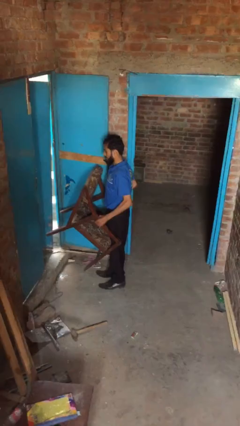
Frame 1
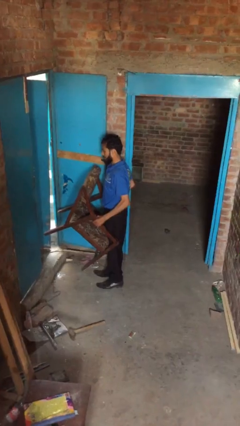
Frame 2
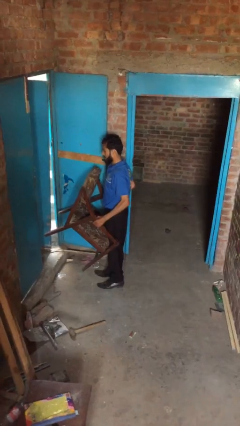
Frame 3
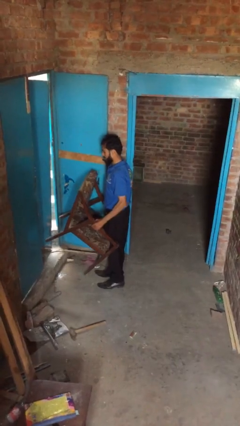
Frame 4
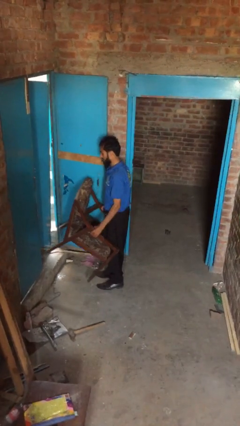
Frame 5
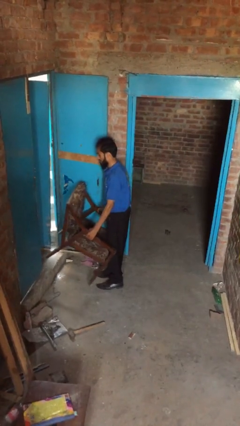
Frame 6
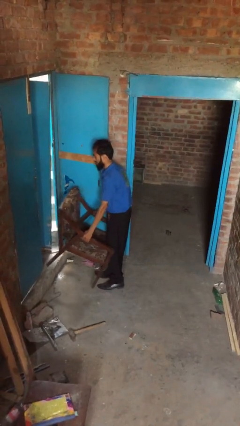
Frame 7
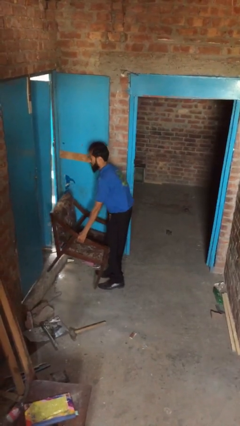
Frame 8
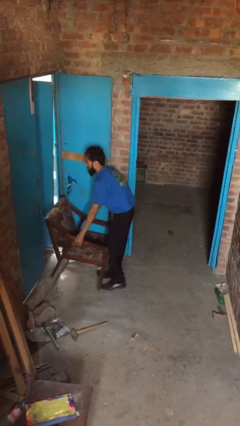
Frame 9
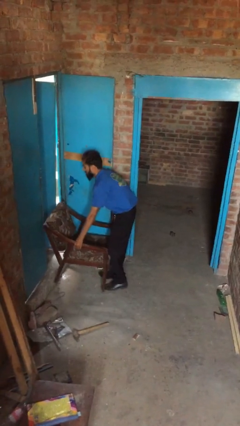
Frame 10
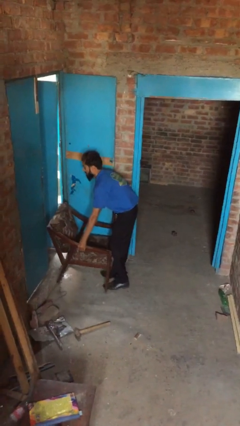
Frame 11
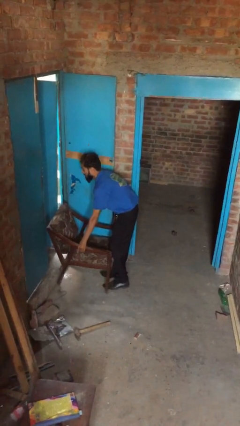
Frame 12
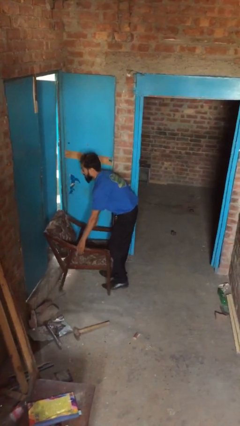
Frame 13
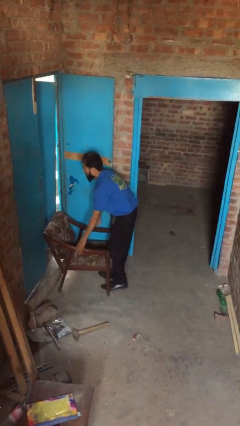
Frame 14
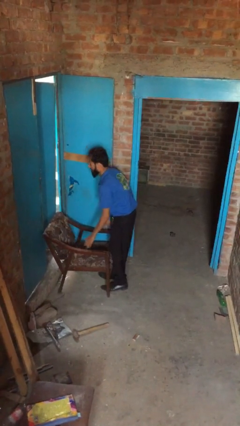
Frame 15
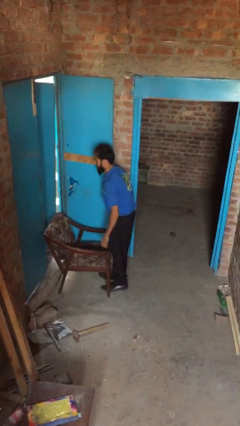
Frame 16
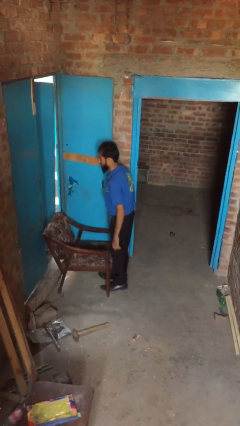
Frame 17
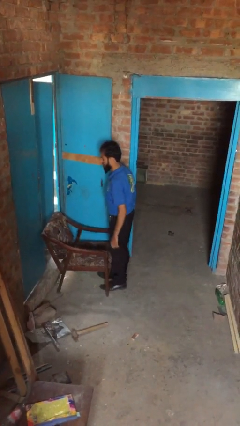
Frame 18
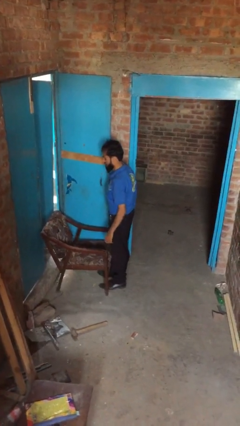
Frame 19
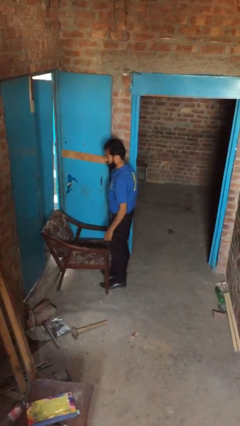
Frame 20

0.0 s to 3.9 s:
person puts down object on floor

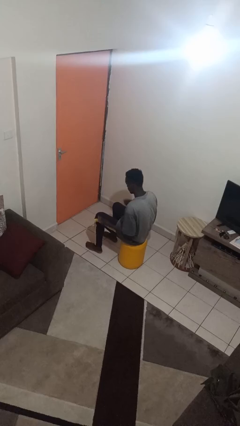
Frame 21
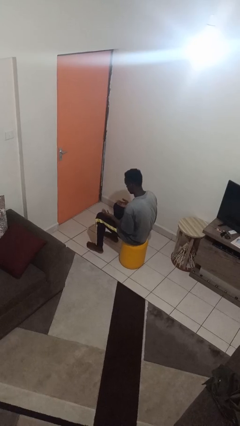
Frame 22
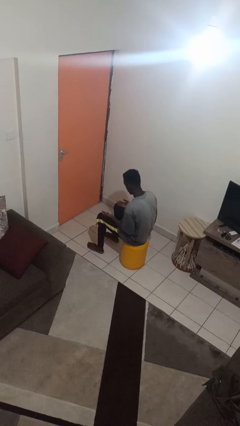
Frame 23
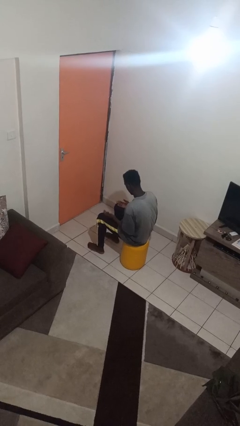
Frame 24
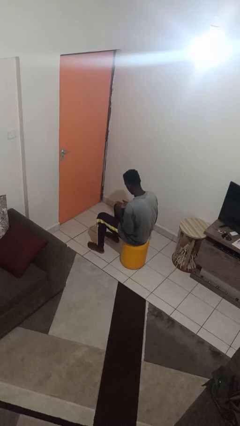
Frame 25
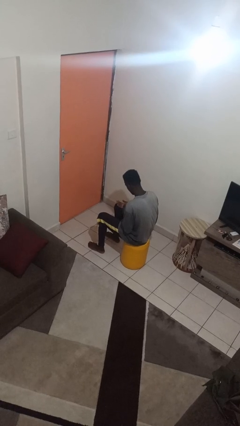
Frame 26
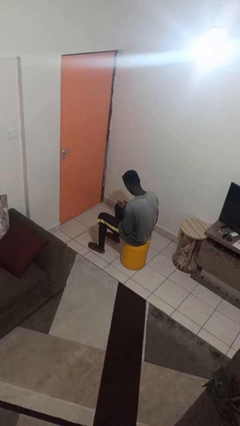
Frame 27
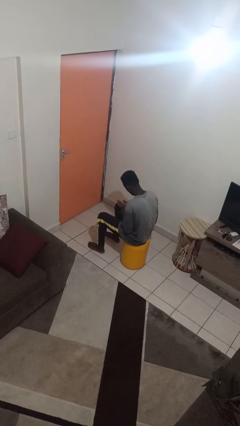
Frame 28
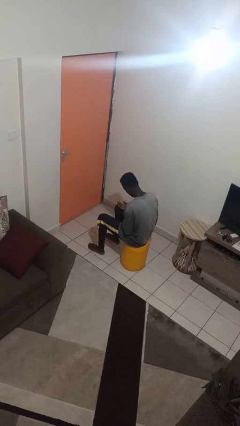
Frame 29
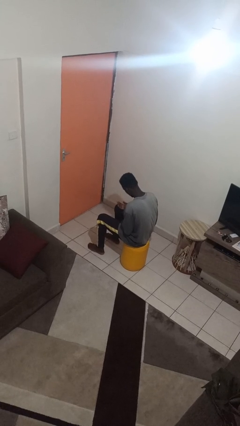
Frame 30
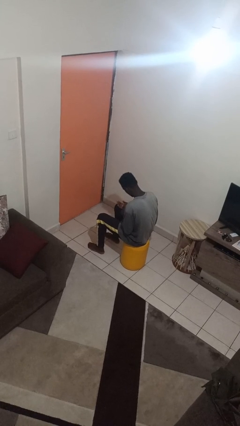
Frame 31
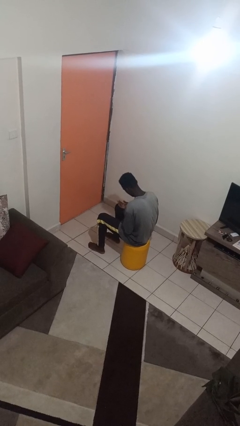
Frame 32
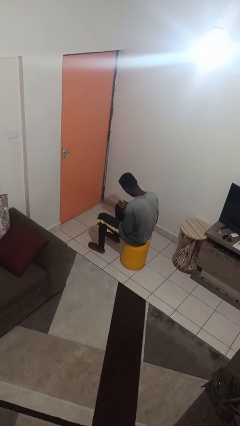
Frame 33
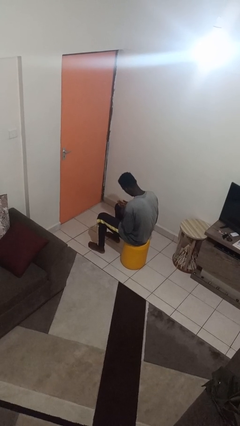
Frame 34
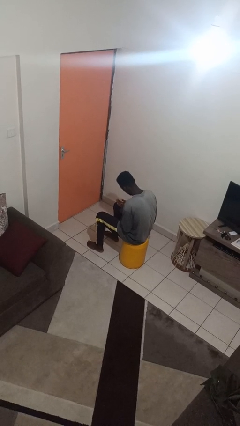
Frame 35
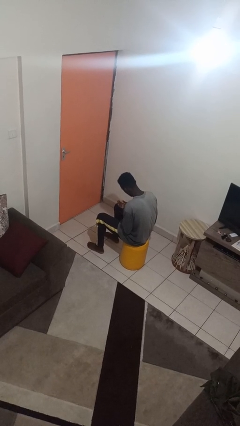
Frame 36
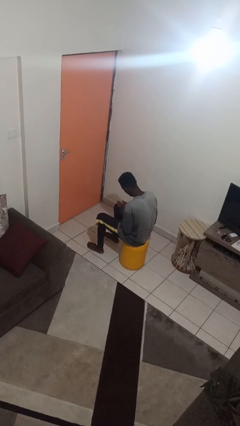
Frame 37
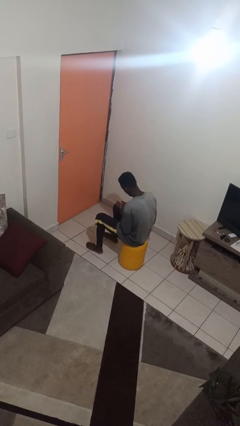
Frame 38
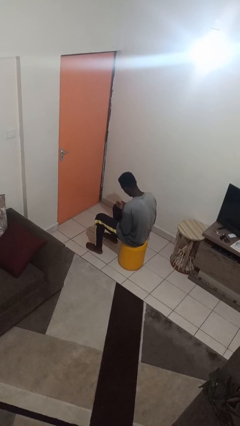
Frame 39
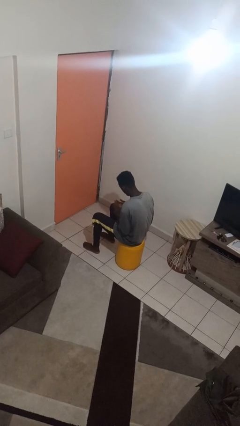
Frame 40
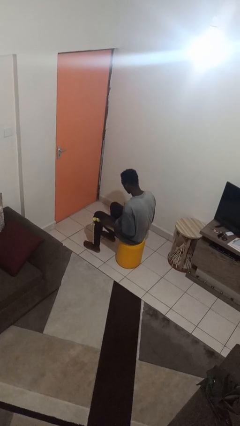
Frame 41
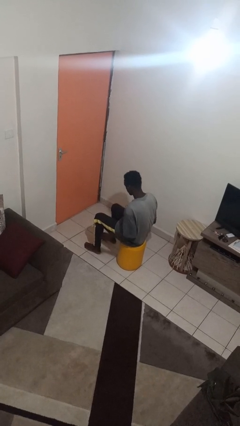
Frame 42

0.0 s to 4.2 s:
person looks at hands in lap

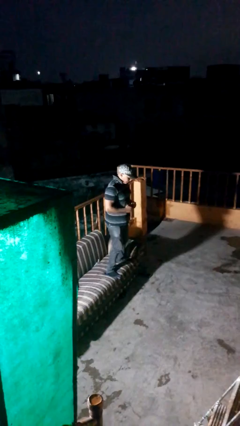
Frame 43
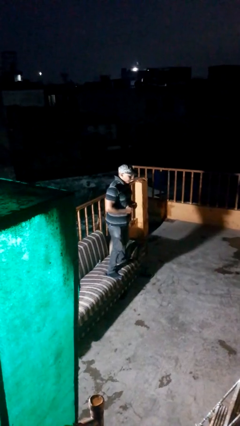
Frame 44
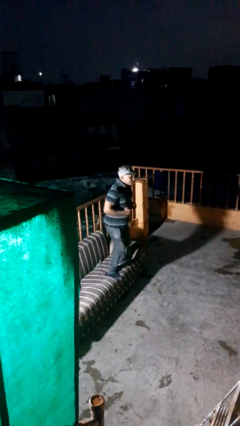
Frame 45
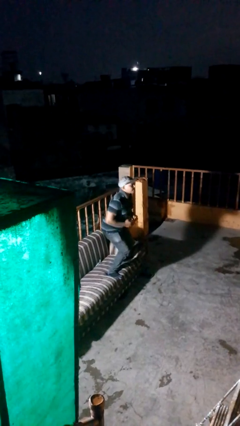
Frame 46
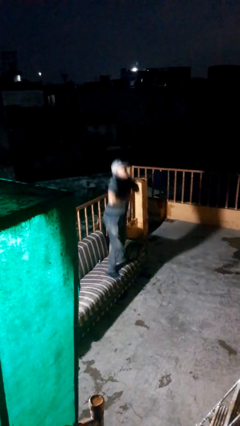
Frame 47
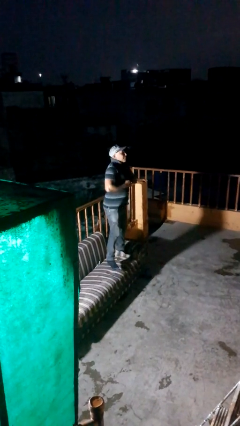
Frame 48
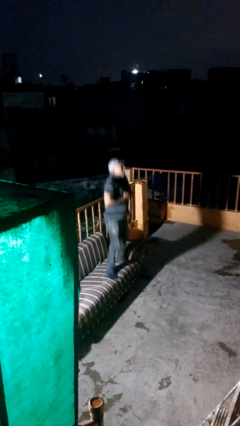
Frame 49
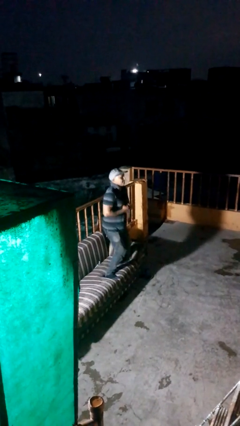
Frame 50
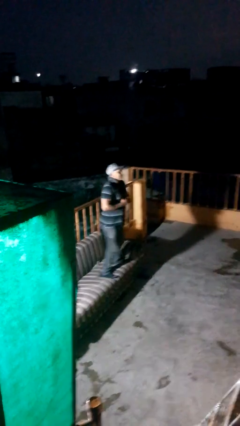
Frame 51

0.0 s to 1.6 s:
person jumps on couch

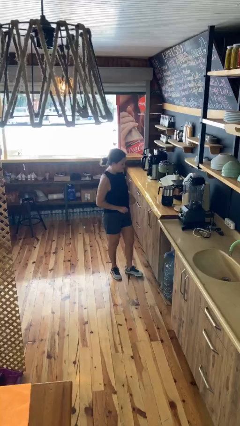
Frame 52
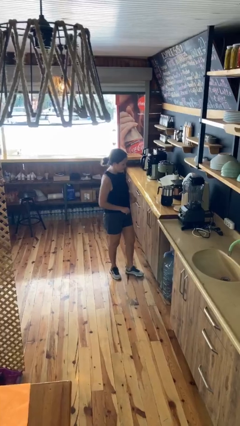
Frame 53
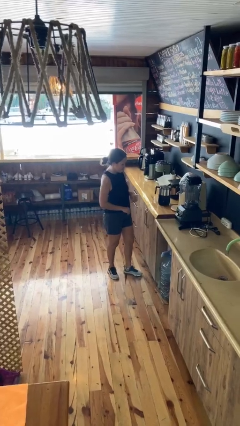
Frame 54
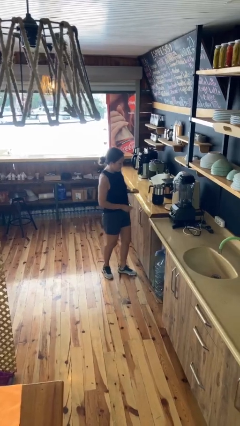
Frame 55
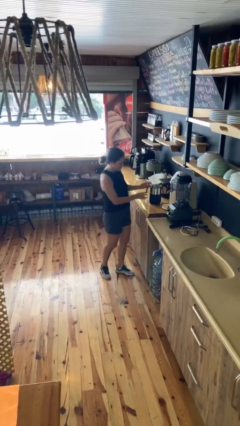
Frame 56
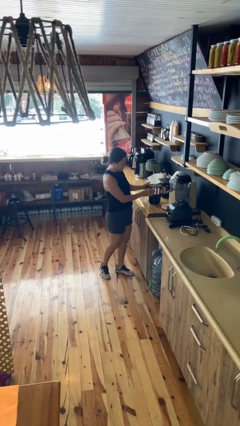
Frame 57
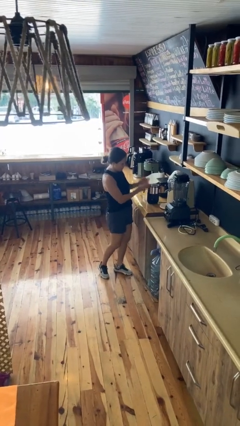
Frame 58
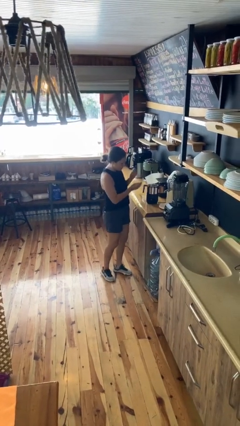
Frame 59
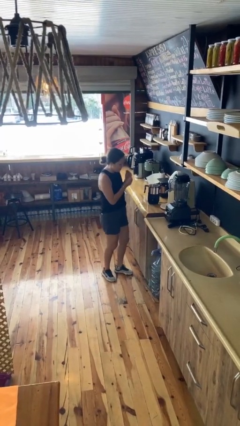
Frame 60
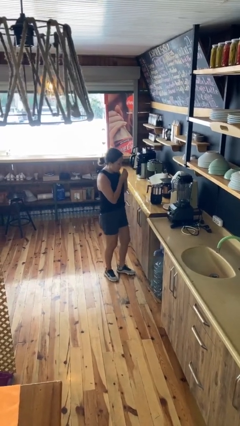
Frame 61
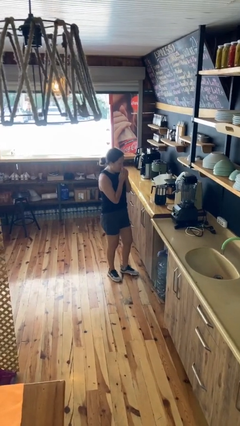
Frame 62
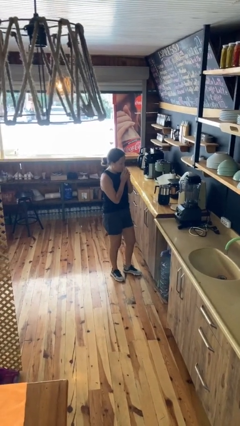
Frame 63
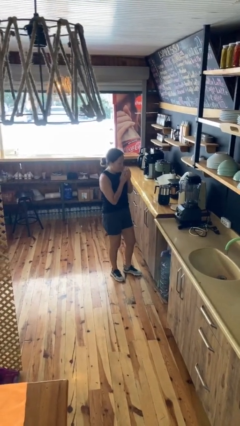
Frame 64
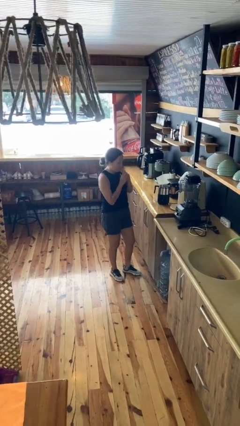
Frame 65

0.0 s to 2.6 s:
person burns hand

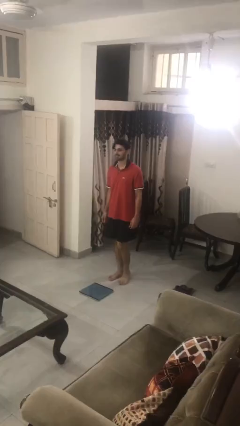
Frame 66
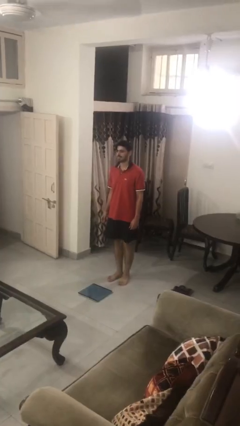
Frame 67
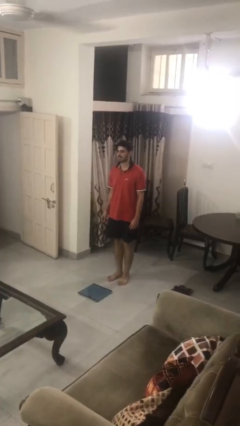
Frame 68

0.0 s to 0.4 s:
person uses bodyweight scale

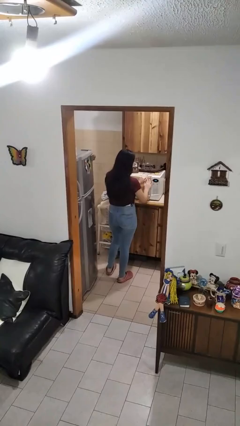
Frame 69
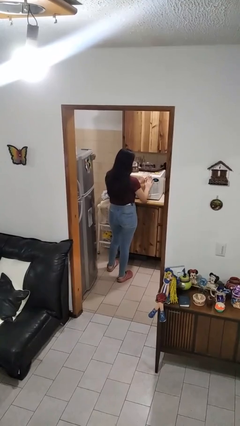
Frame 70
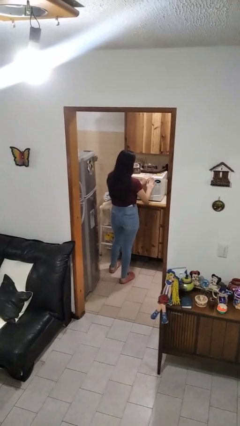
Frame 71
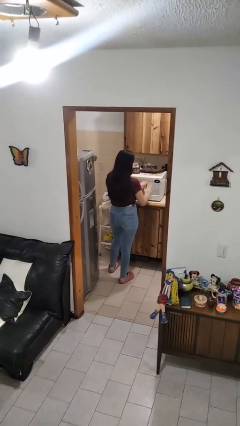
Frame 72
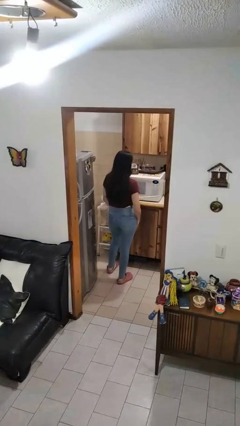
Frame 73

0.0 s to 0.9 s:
person closes microwave

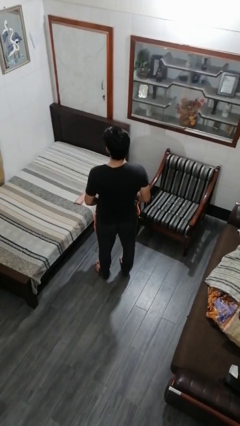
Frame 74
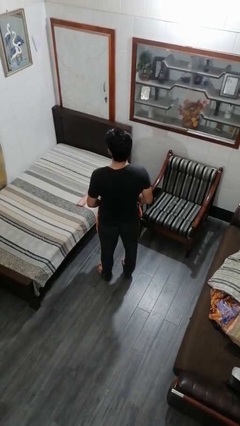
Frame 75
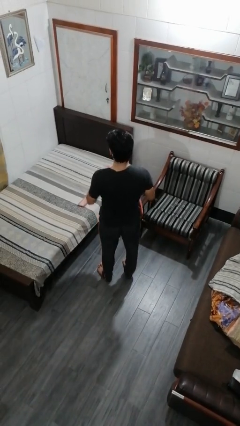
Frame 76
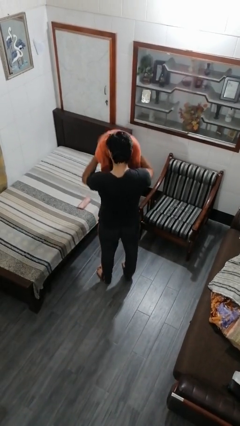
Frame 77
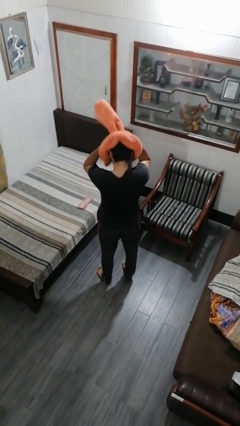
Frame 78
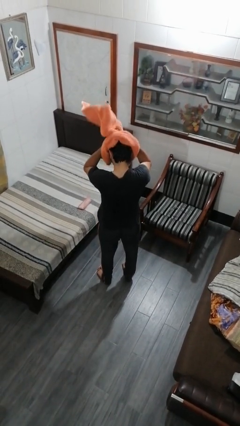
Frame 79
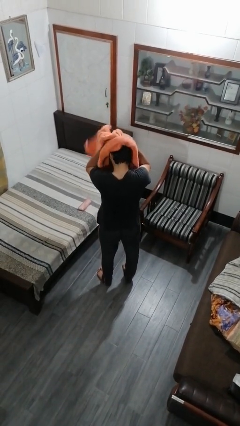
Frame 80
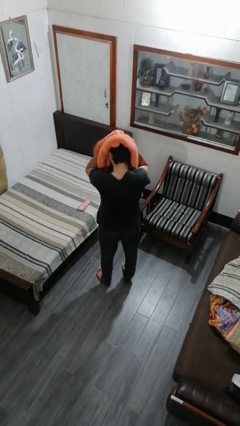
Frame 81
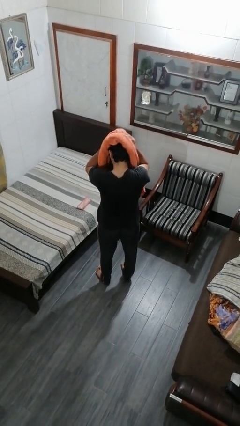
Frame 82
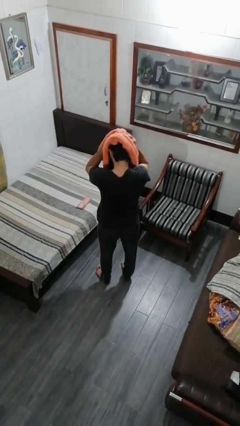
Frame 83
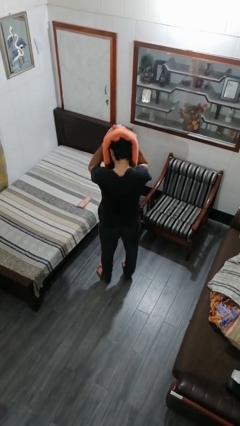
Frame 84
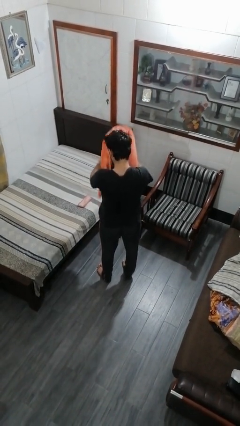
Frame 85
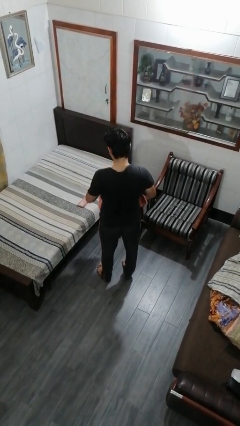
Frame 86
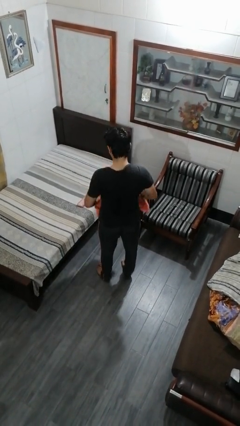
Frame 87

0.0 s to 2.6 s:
person dries hair with towel

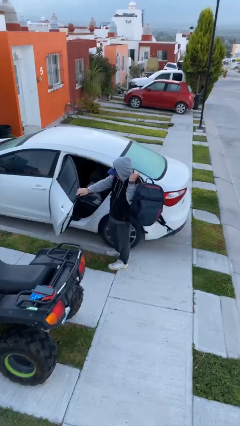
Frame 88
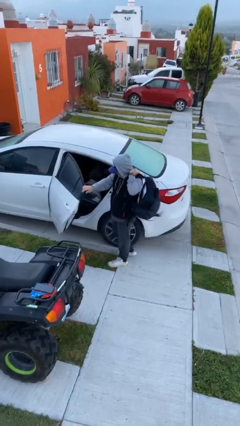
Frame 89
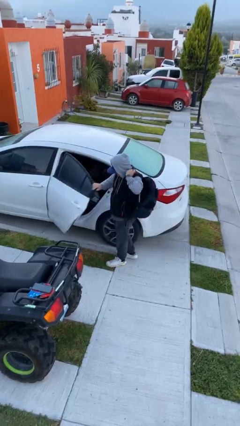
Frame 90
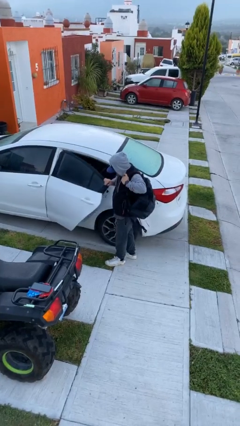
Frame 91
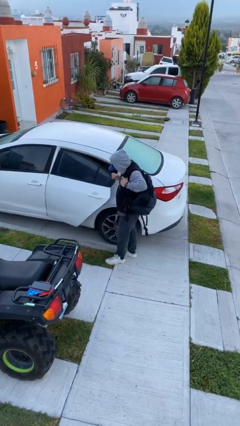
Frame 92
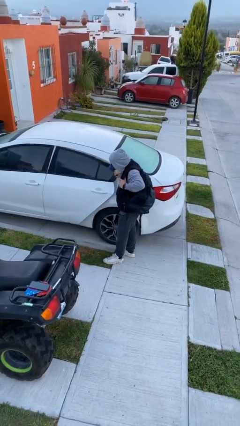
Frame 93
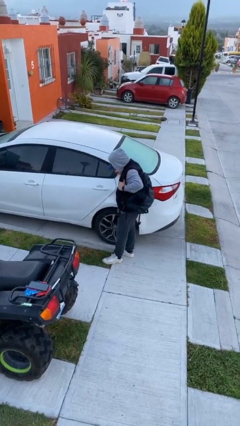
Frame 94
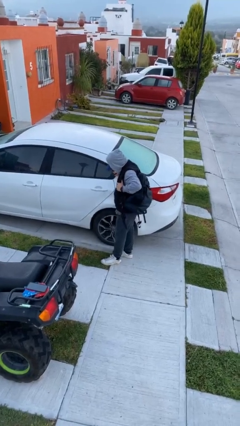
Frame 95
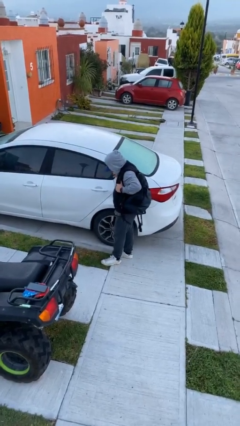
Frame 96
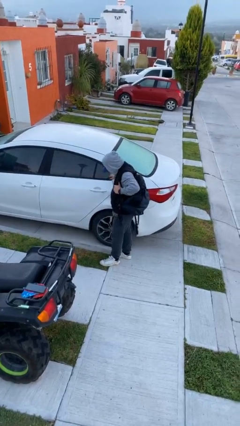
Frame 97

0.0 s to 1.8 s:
person closes car door
